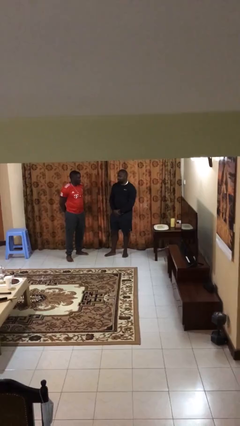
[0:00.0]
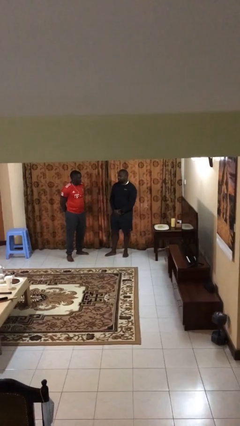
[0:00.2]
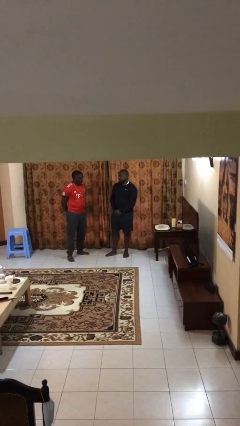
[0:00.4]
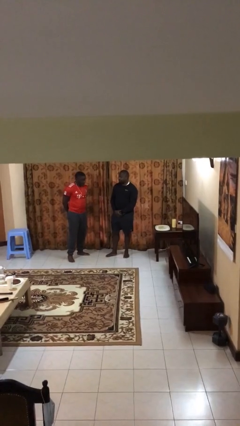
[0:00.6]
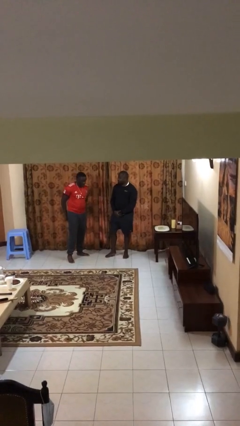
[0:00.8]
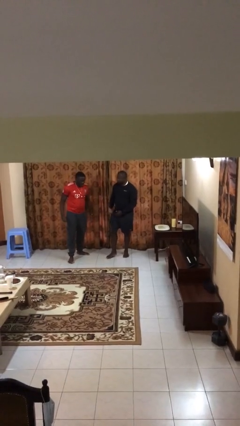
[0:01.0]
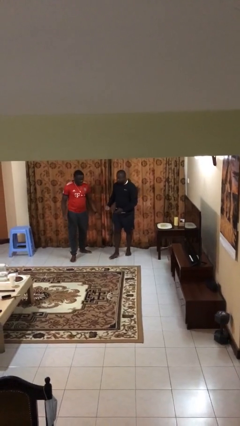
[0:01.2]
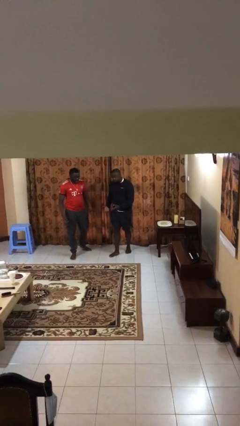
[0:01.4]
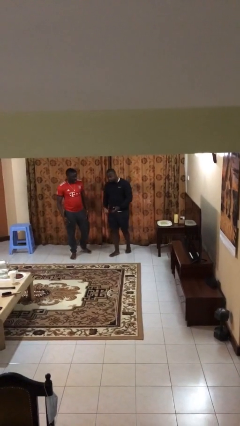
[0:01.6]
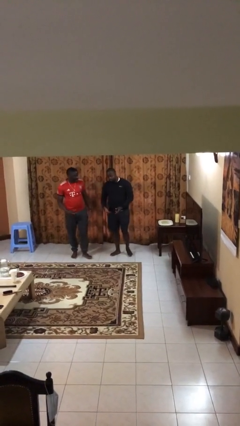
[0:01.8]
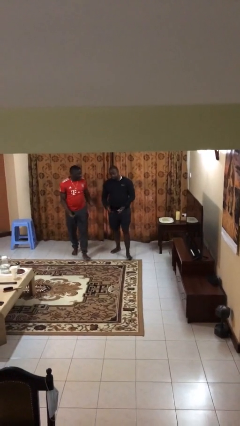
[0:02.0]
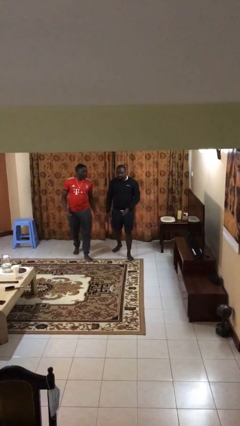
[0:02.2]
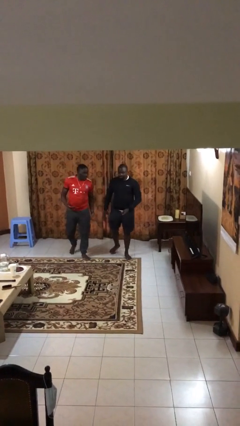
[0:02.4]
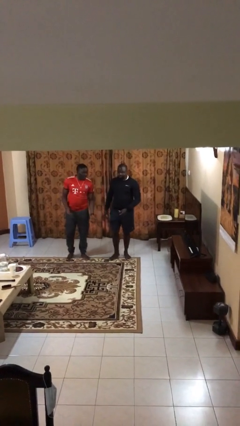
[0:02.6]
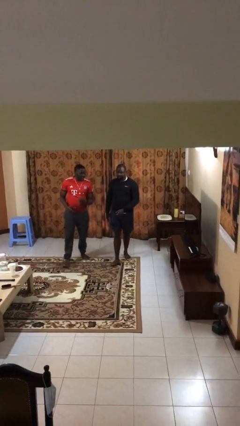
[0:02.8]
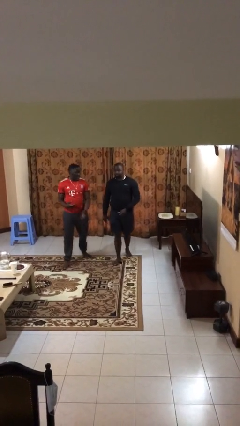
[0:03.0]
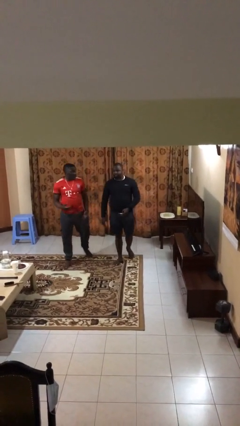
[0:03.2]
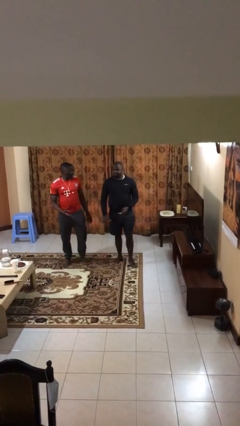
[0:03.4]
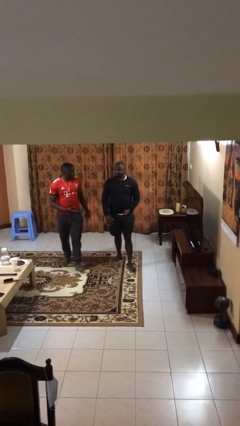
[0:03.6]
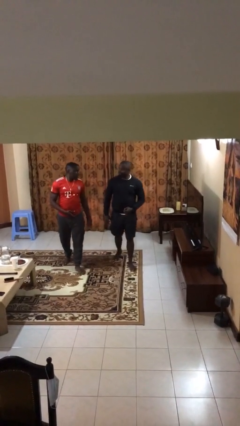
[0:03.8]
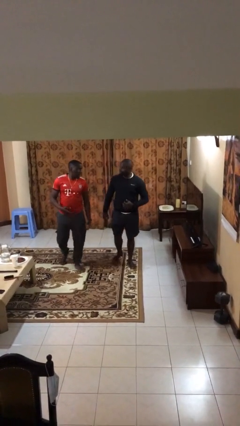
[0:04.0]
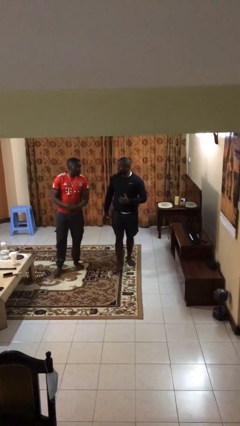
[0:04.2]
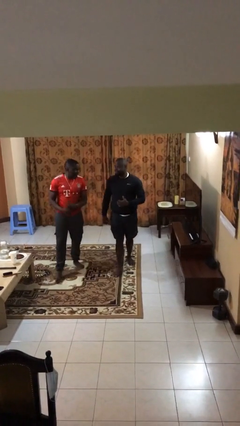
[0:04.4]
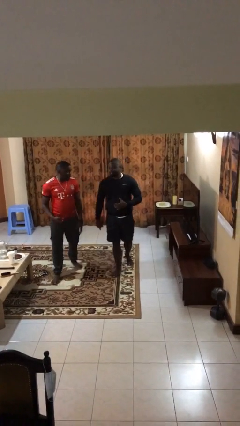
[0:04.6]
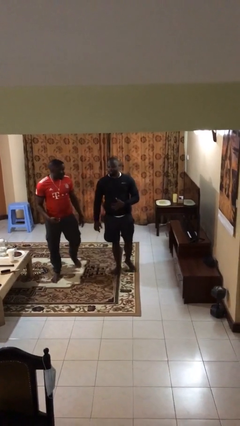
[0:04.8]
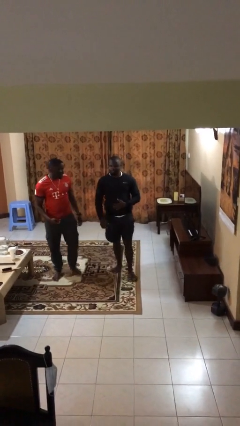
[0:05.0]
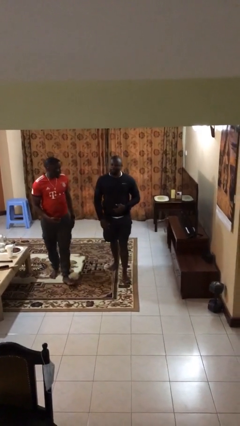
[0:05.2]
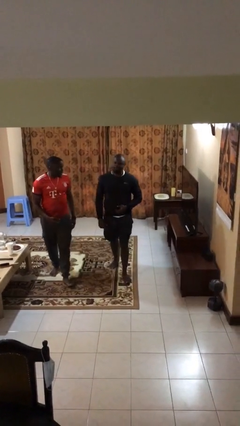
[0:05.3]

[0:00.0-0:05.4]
person talks to person

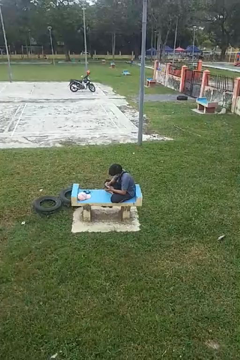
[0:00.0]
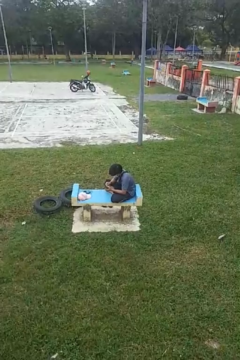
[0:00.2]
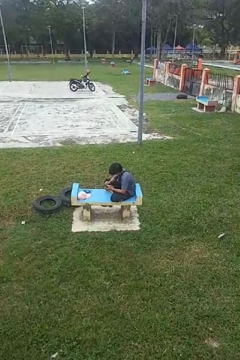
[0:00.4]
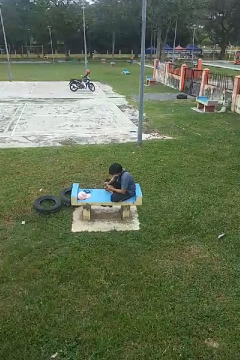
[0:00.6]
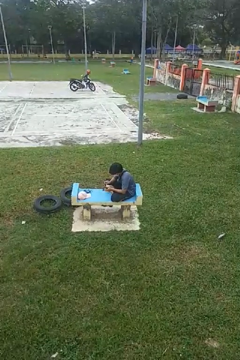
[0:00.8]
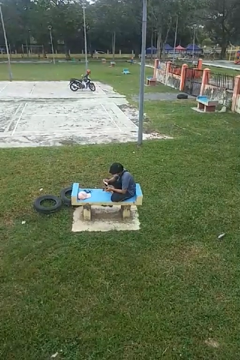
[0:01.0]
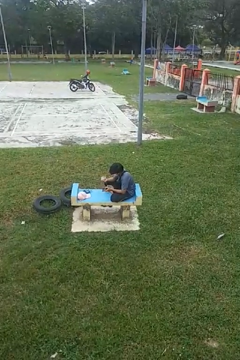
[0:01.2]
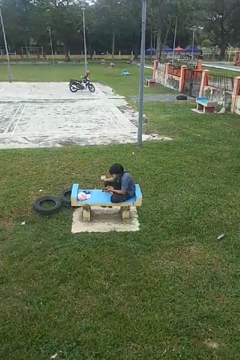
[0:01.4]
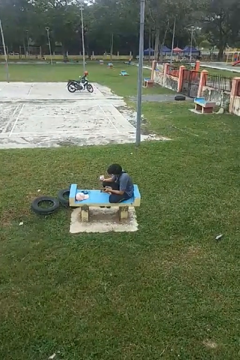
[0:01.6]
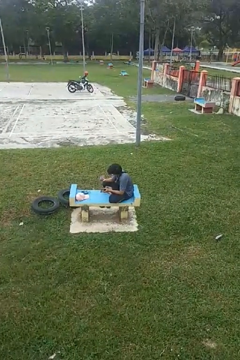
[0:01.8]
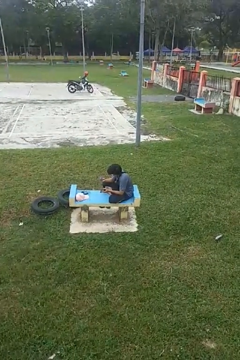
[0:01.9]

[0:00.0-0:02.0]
person takes object from purse

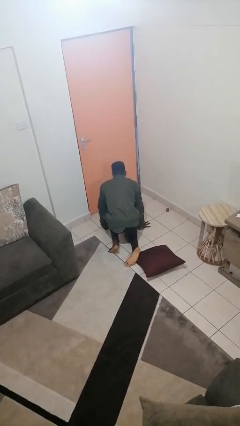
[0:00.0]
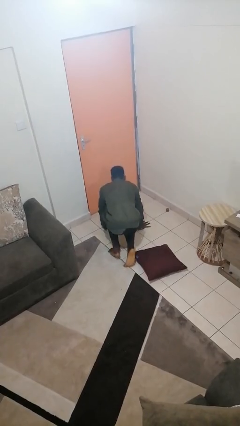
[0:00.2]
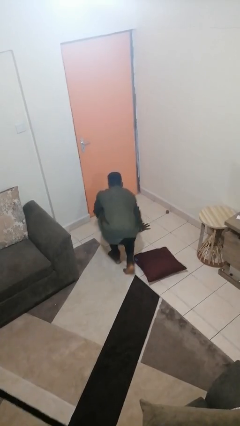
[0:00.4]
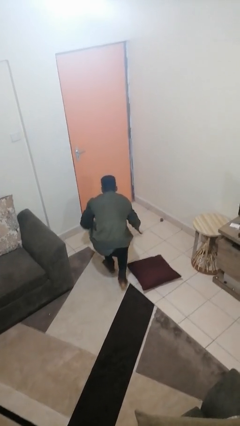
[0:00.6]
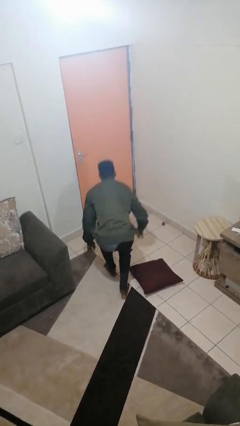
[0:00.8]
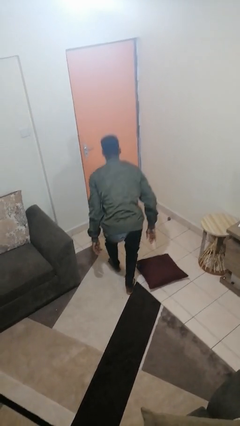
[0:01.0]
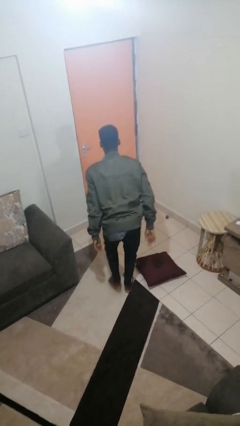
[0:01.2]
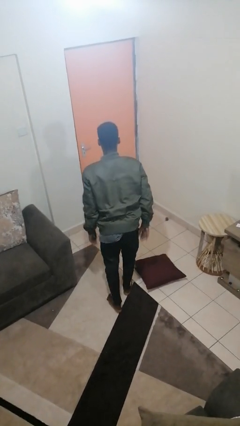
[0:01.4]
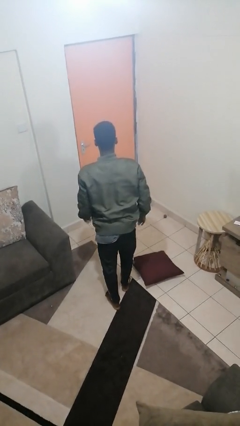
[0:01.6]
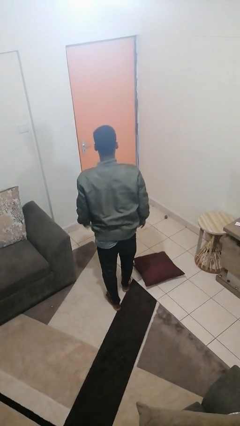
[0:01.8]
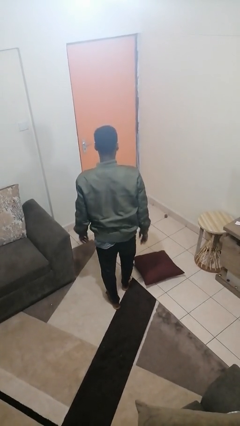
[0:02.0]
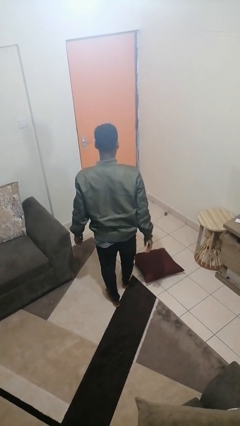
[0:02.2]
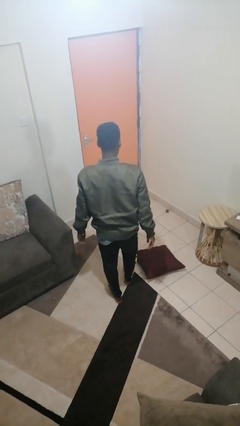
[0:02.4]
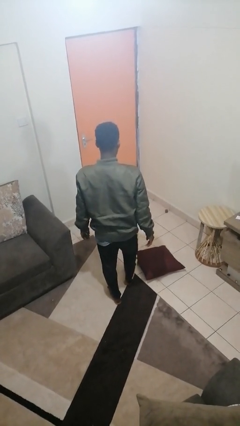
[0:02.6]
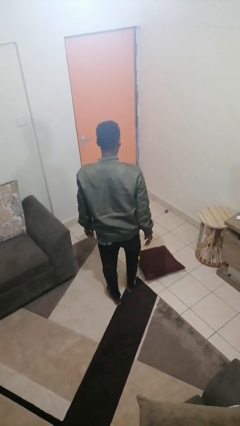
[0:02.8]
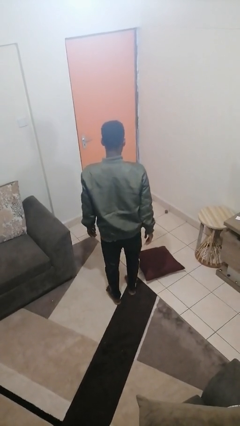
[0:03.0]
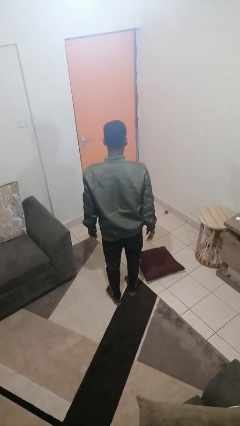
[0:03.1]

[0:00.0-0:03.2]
person stands up from floor

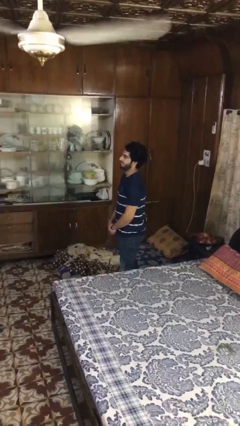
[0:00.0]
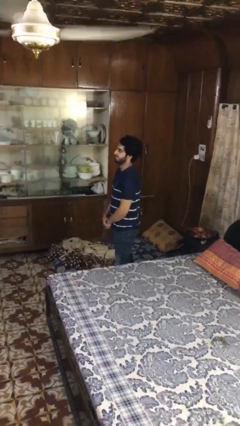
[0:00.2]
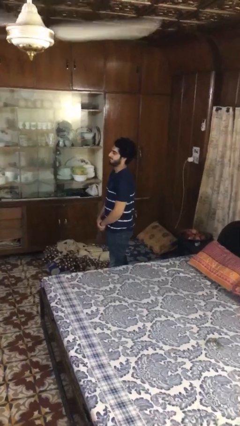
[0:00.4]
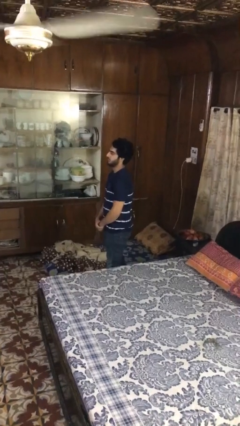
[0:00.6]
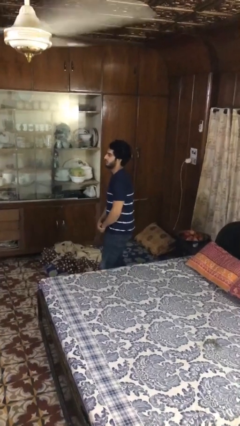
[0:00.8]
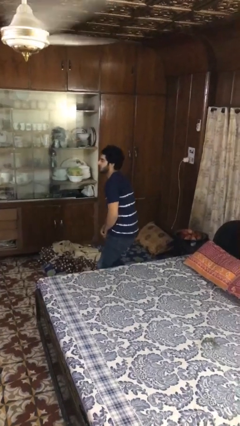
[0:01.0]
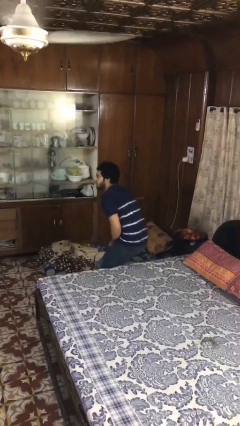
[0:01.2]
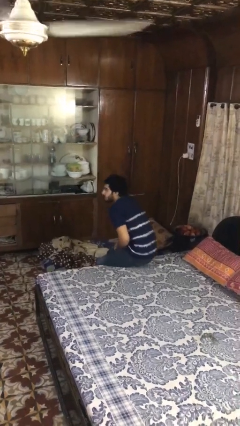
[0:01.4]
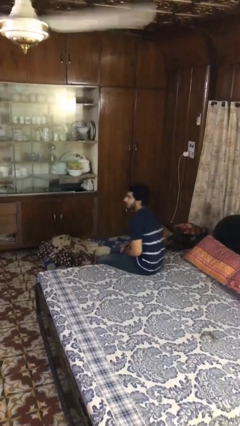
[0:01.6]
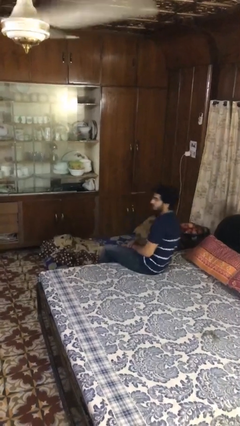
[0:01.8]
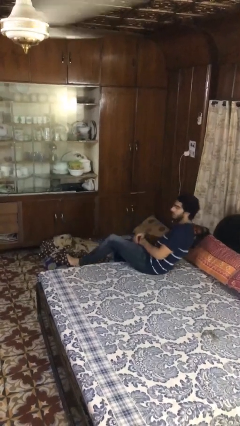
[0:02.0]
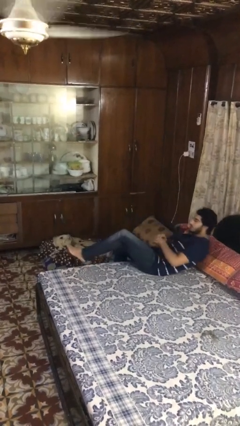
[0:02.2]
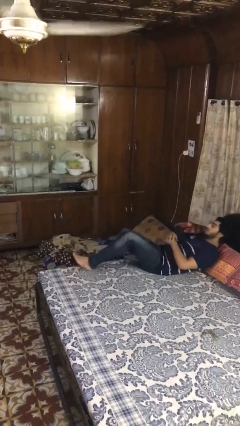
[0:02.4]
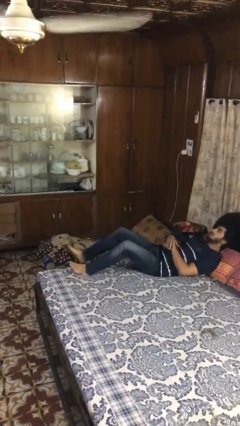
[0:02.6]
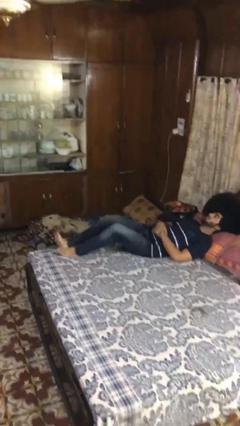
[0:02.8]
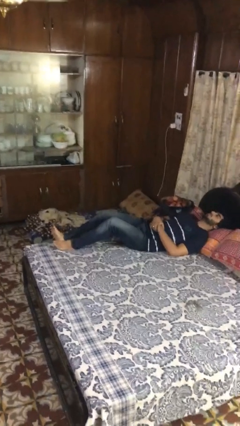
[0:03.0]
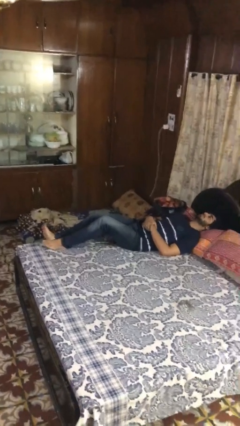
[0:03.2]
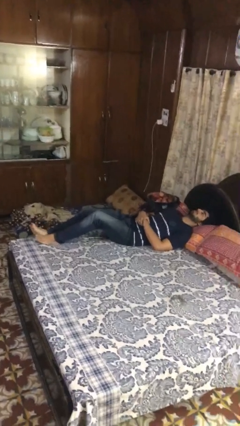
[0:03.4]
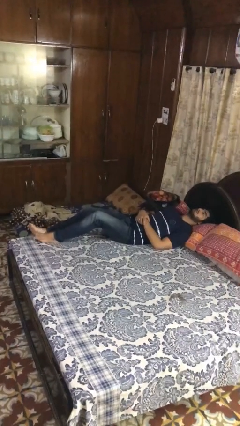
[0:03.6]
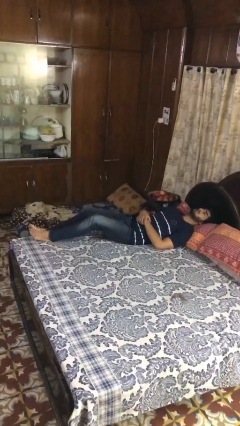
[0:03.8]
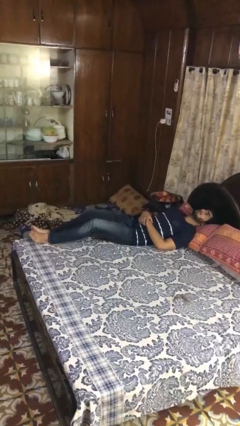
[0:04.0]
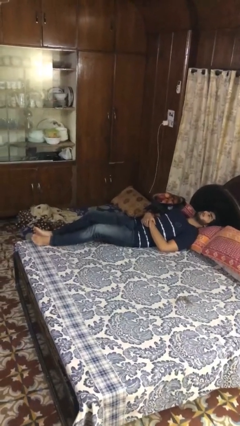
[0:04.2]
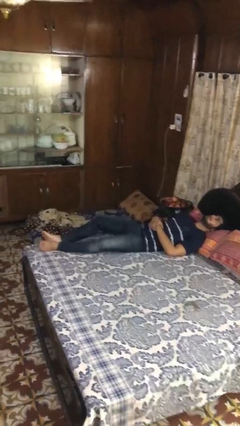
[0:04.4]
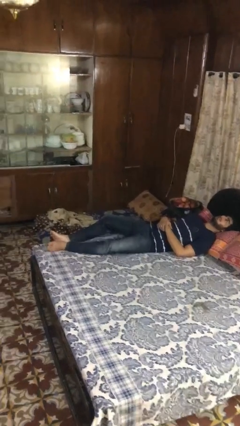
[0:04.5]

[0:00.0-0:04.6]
person lies down on bed

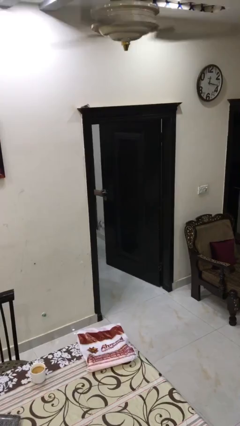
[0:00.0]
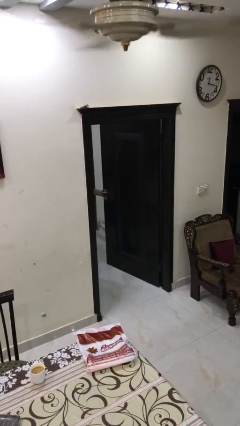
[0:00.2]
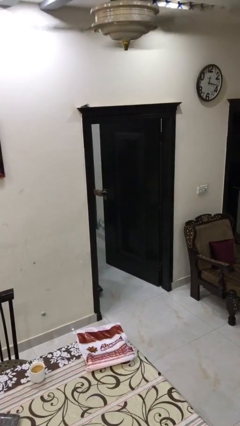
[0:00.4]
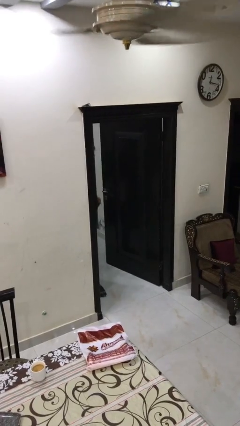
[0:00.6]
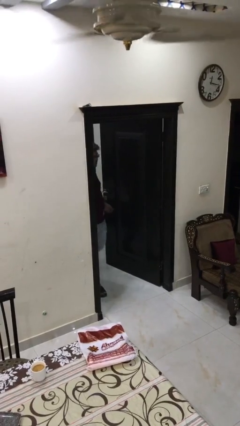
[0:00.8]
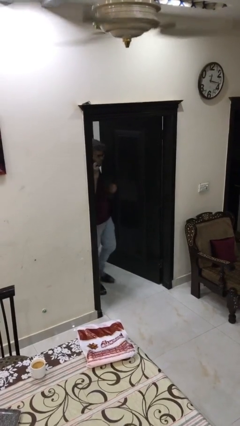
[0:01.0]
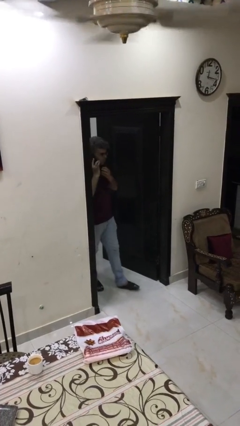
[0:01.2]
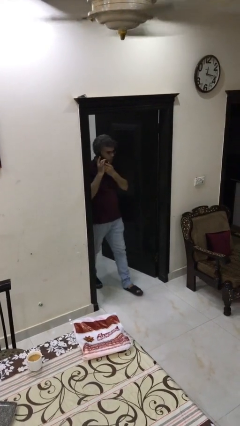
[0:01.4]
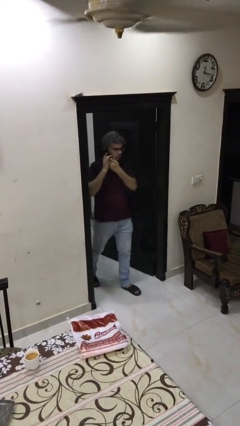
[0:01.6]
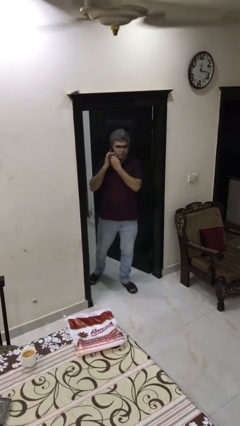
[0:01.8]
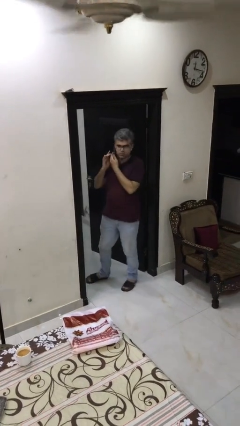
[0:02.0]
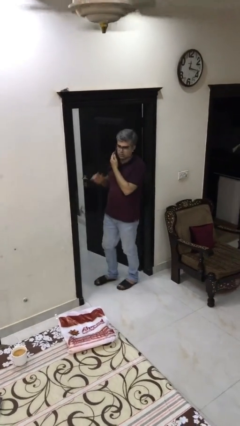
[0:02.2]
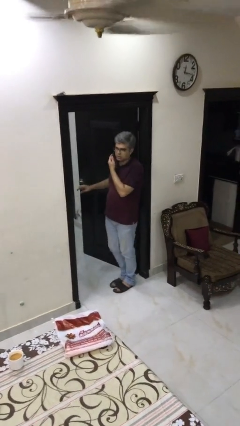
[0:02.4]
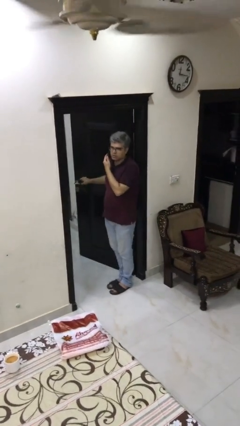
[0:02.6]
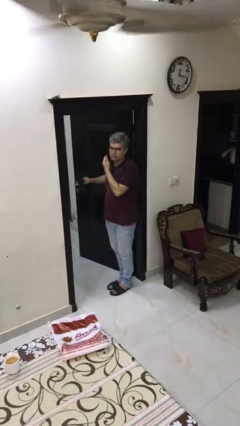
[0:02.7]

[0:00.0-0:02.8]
person enters scene through structure

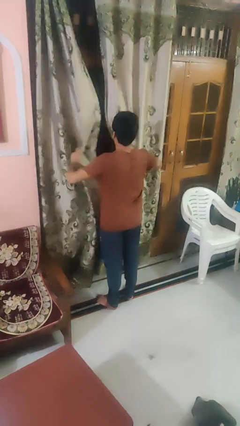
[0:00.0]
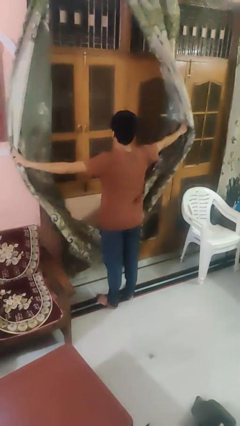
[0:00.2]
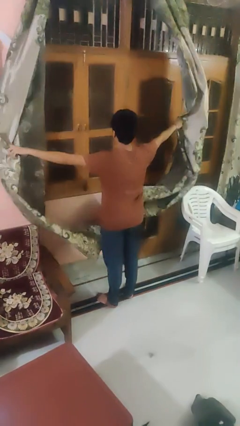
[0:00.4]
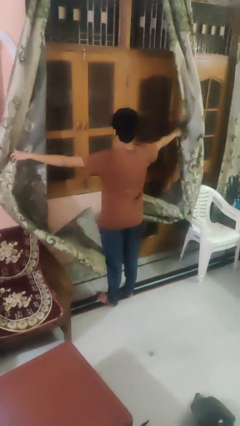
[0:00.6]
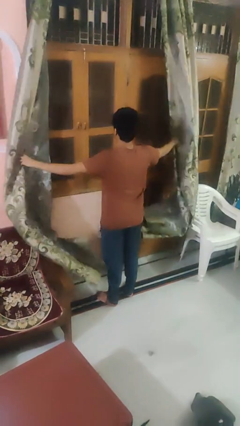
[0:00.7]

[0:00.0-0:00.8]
person opens curtains
